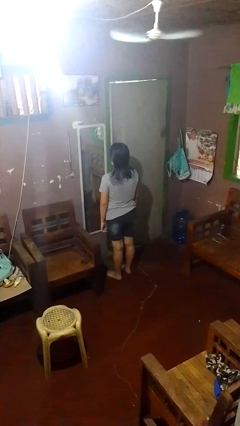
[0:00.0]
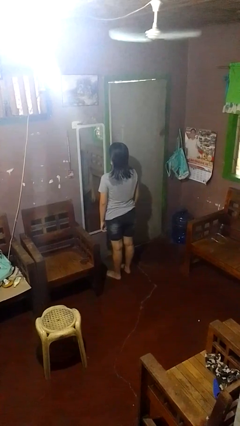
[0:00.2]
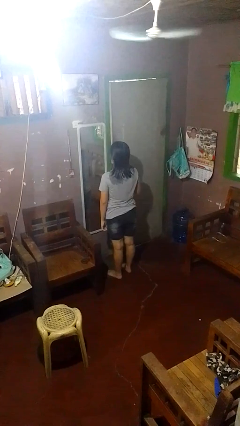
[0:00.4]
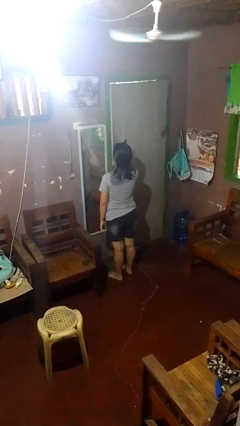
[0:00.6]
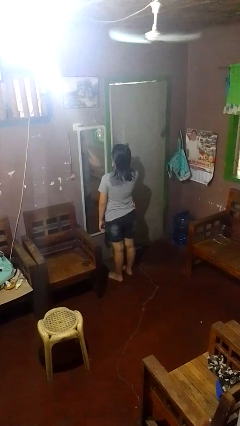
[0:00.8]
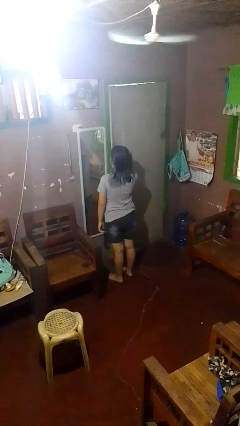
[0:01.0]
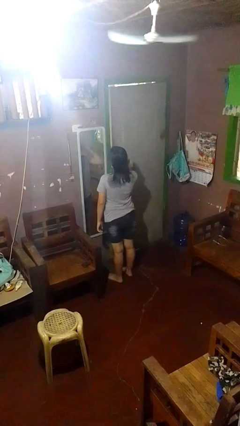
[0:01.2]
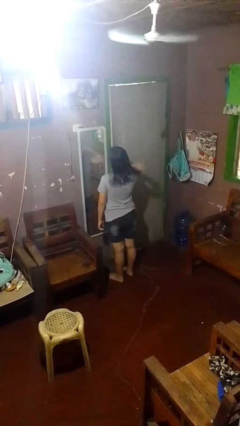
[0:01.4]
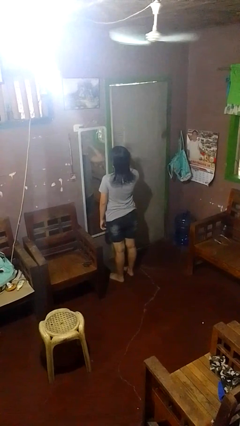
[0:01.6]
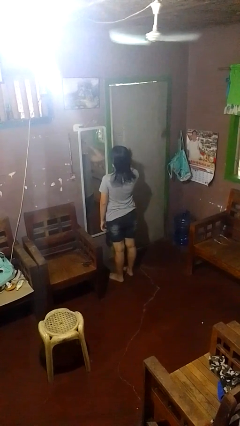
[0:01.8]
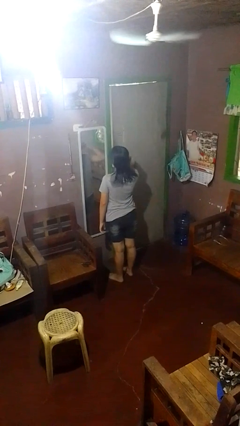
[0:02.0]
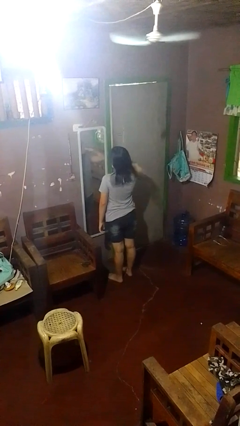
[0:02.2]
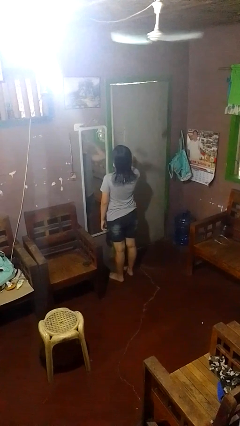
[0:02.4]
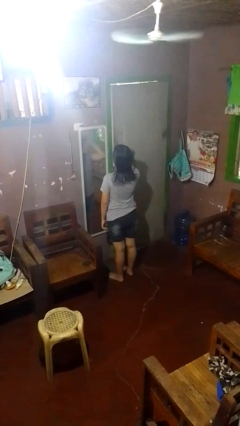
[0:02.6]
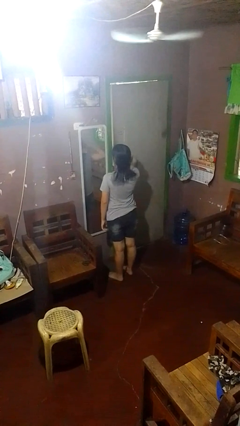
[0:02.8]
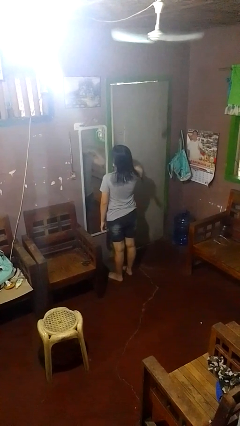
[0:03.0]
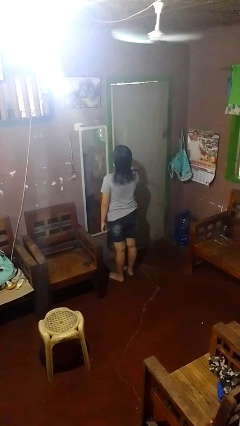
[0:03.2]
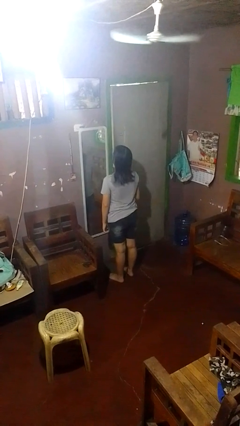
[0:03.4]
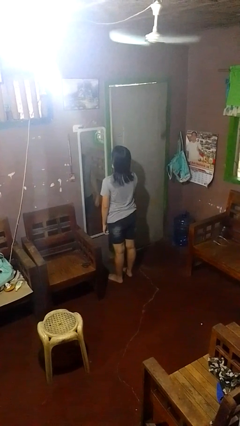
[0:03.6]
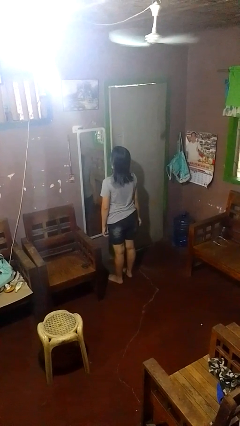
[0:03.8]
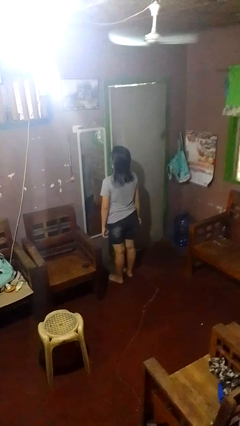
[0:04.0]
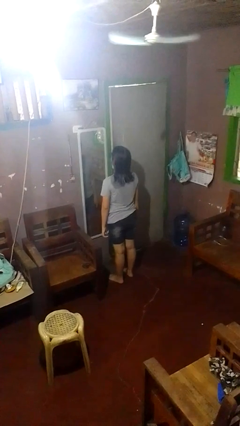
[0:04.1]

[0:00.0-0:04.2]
person brushes hair

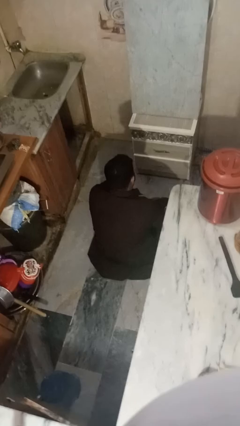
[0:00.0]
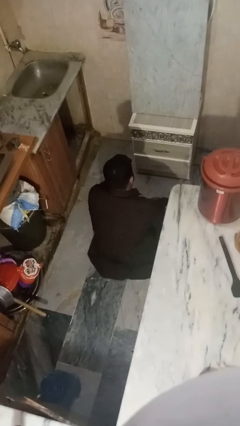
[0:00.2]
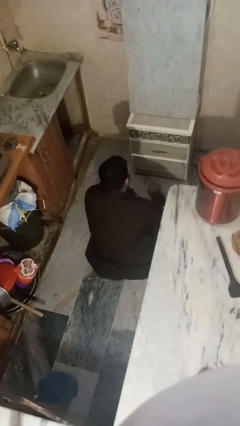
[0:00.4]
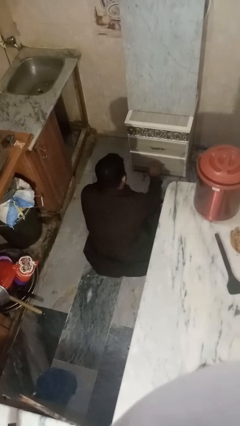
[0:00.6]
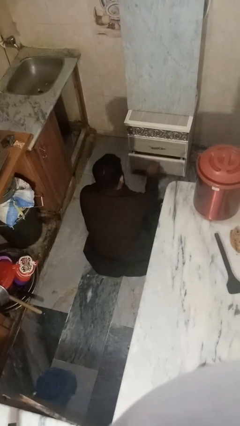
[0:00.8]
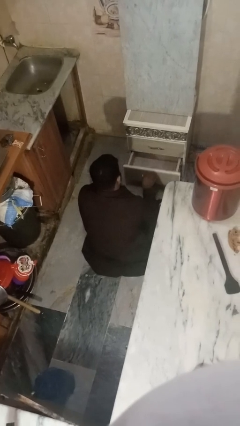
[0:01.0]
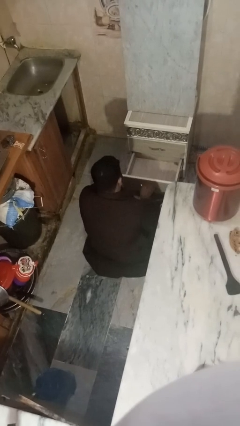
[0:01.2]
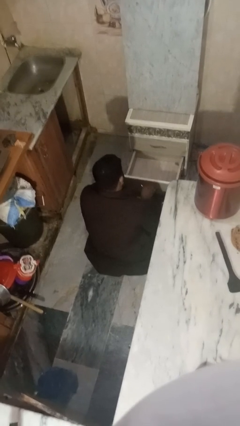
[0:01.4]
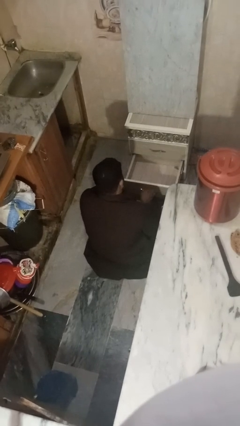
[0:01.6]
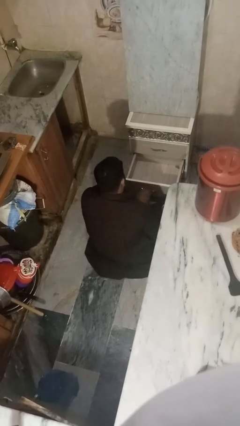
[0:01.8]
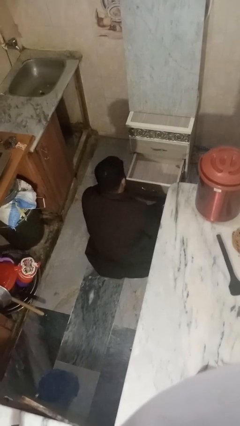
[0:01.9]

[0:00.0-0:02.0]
person opens kitchen drawer

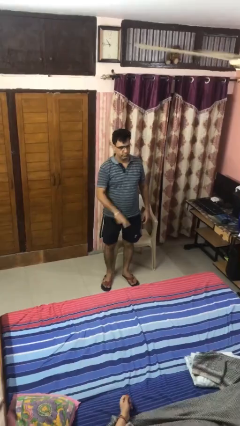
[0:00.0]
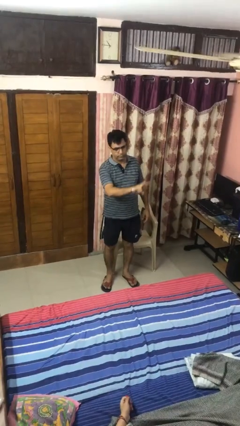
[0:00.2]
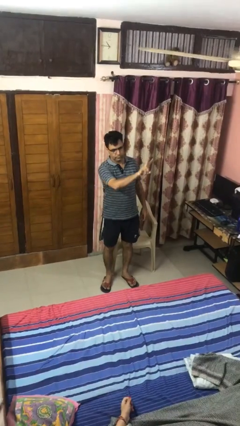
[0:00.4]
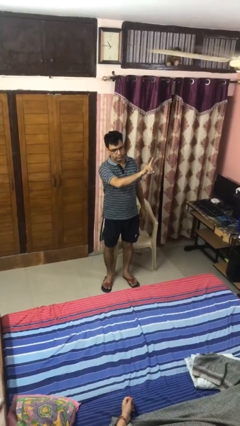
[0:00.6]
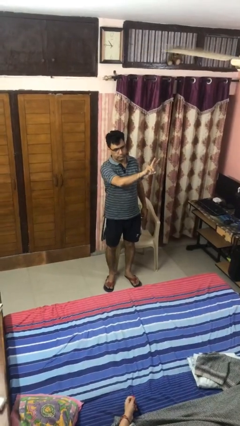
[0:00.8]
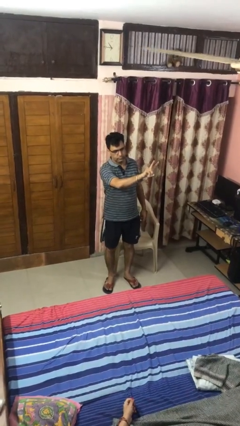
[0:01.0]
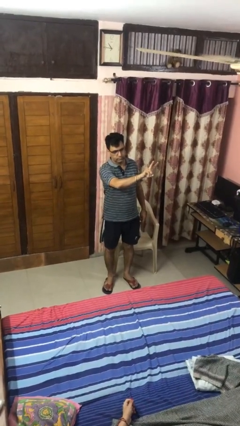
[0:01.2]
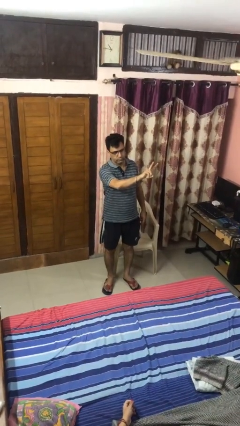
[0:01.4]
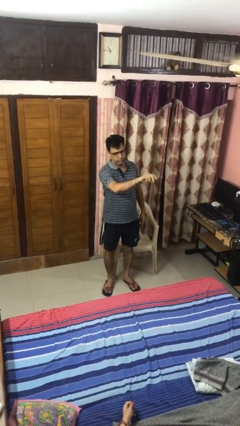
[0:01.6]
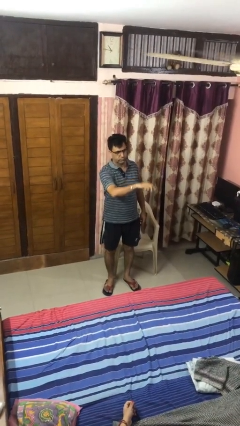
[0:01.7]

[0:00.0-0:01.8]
person gestures peace

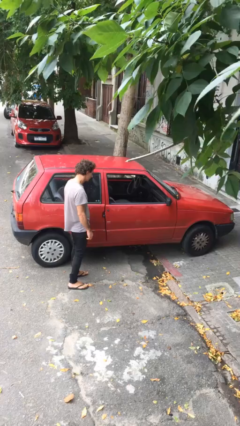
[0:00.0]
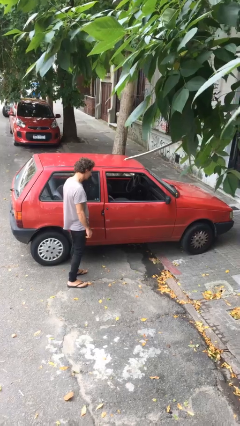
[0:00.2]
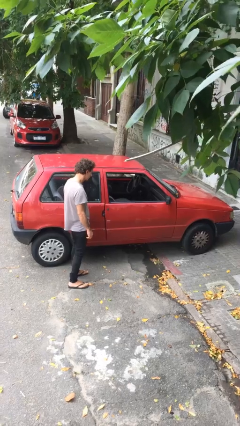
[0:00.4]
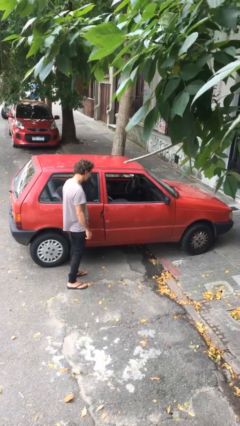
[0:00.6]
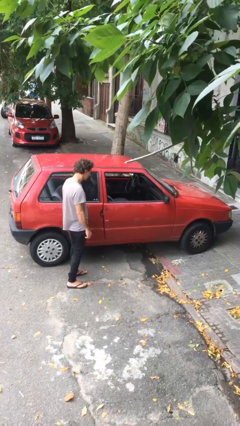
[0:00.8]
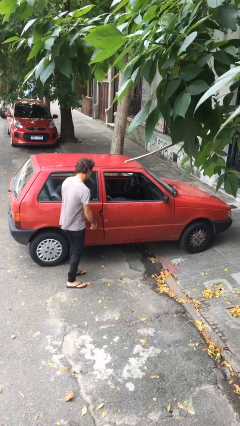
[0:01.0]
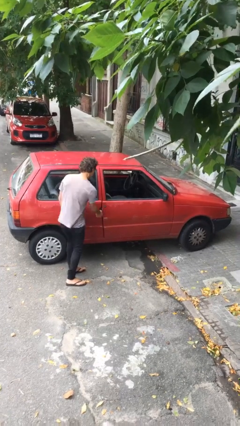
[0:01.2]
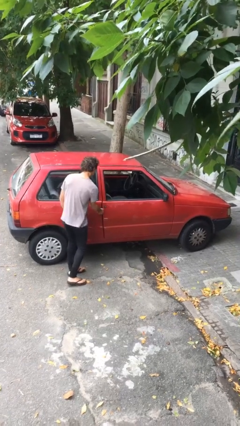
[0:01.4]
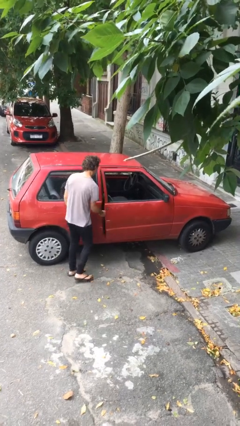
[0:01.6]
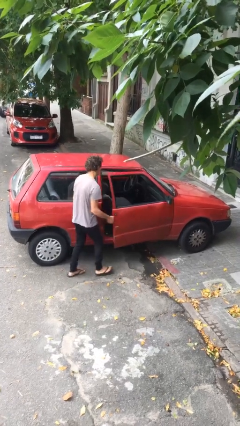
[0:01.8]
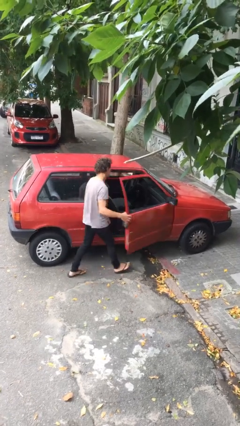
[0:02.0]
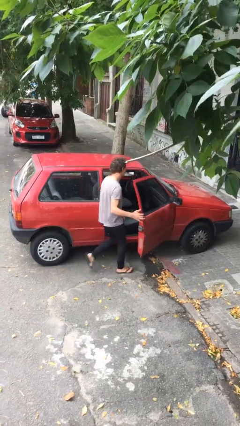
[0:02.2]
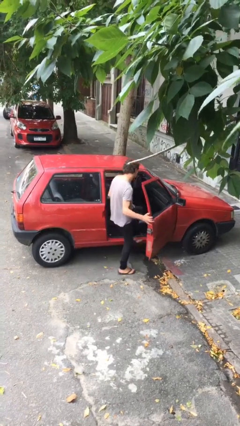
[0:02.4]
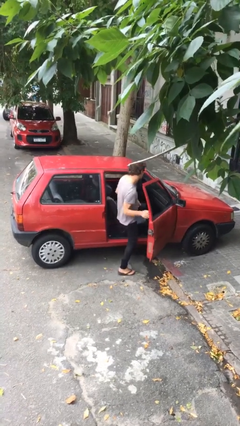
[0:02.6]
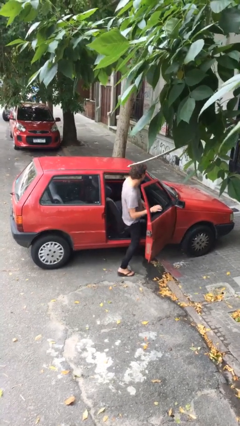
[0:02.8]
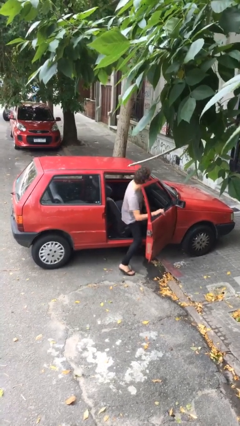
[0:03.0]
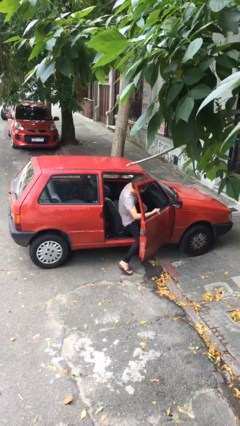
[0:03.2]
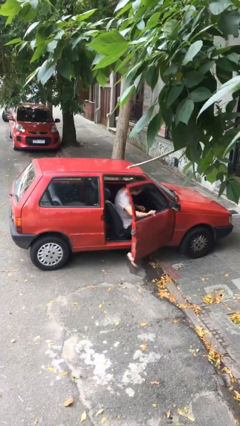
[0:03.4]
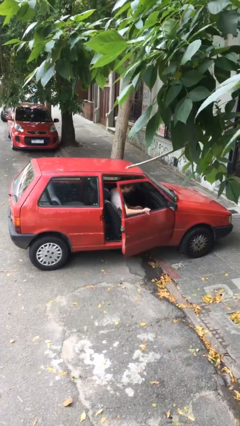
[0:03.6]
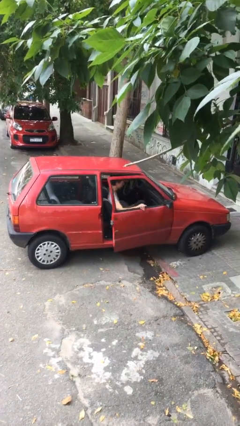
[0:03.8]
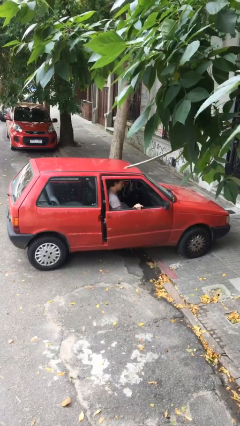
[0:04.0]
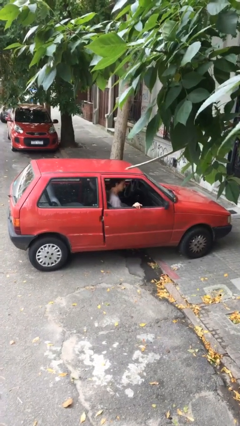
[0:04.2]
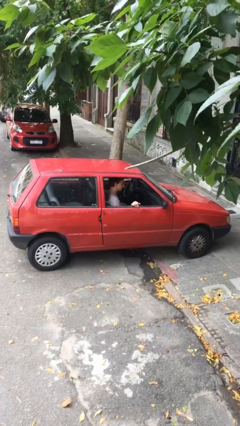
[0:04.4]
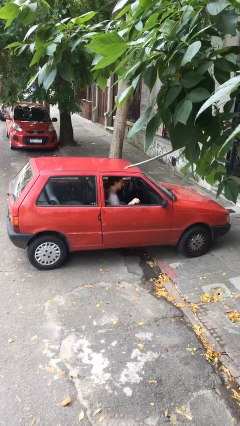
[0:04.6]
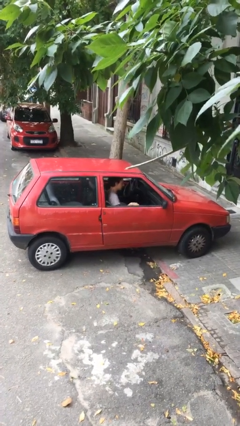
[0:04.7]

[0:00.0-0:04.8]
car picks up person

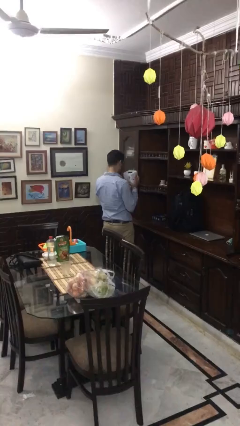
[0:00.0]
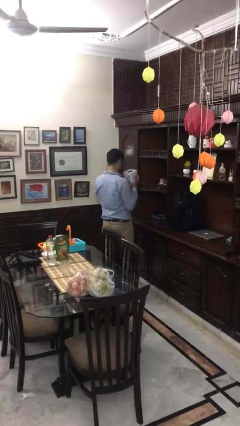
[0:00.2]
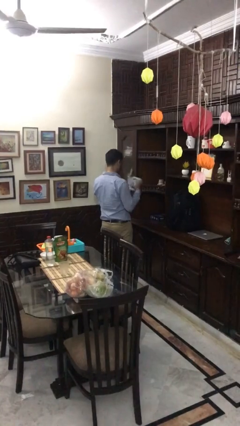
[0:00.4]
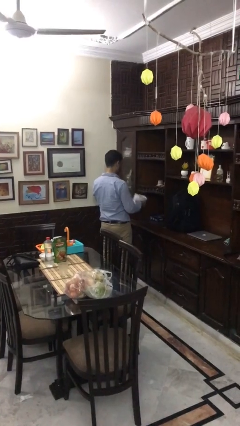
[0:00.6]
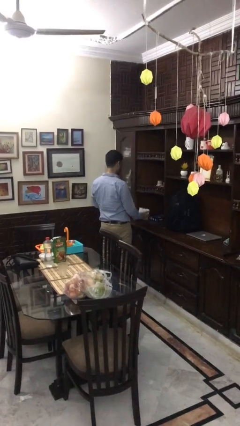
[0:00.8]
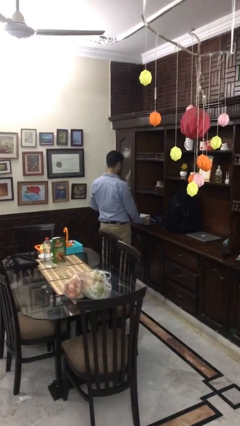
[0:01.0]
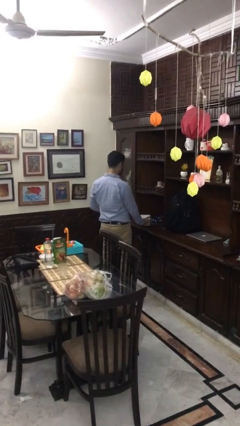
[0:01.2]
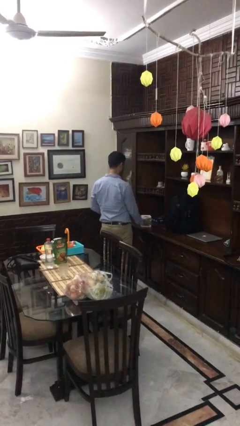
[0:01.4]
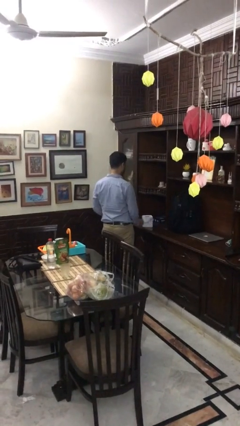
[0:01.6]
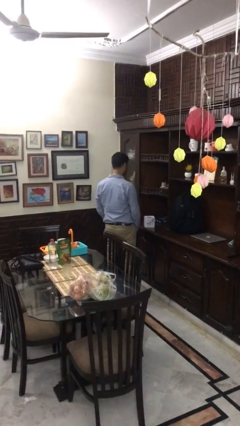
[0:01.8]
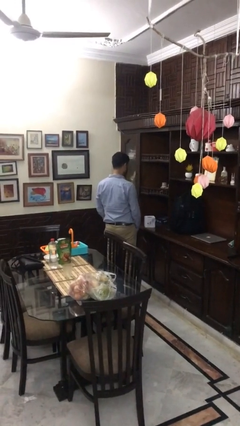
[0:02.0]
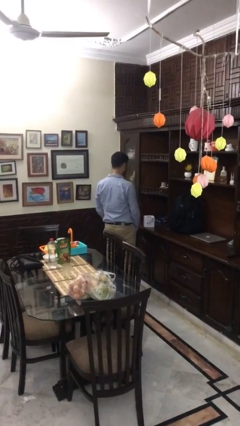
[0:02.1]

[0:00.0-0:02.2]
person puts down object on countertop

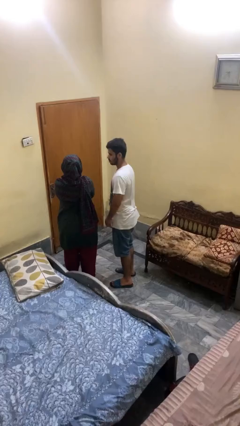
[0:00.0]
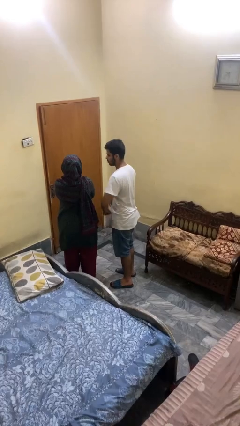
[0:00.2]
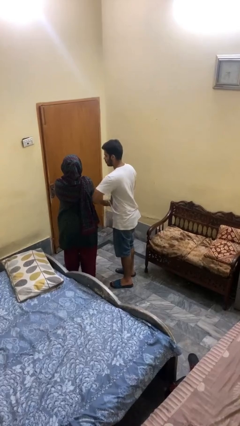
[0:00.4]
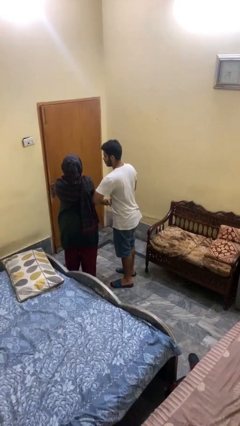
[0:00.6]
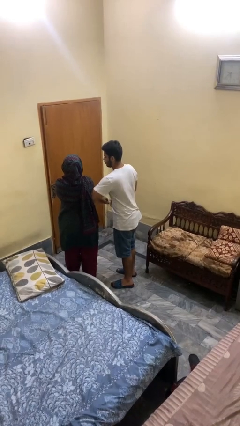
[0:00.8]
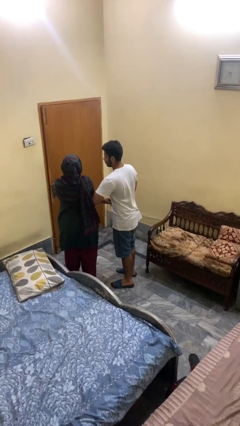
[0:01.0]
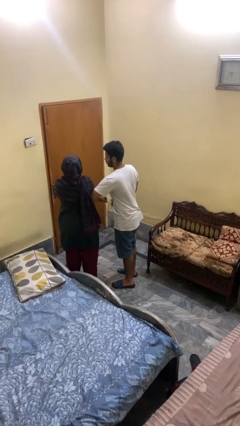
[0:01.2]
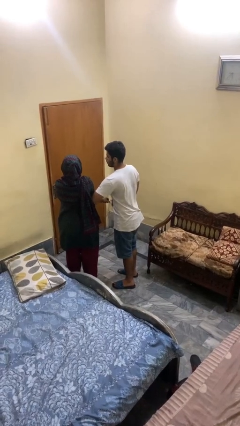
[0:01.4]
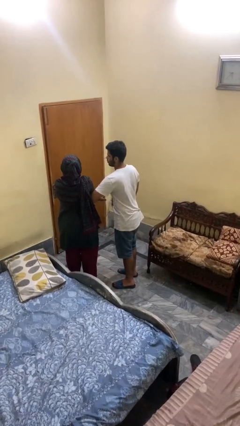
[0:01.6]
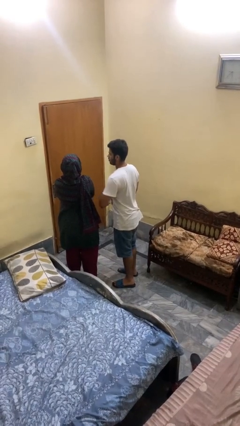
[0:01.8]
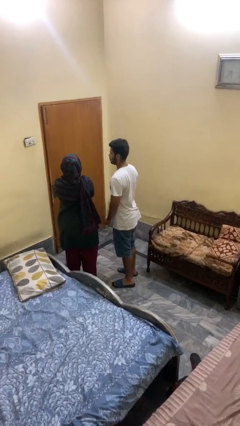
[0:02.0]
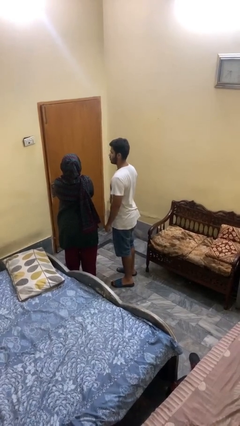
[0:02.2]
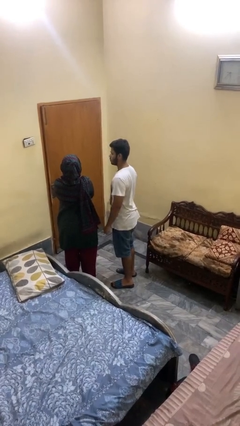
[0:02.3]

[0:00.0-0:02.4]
person nudges person with elbow
